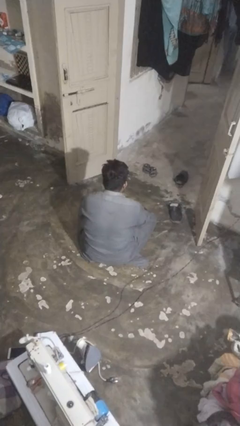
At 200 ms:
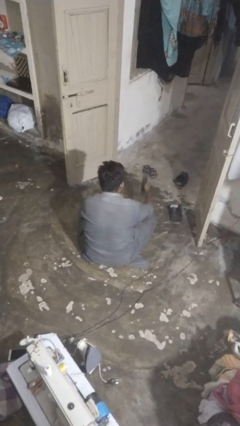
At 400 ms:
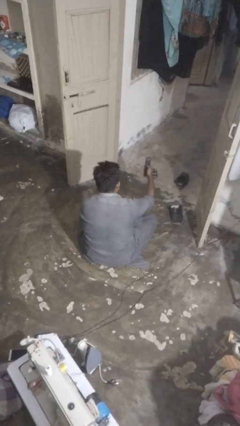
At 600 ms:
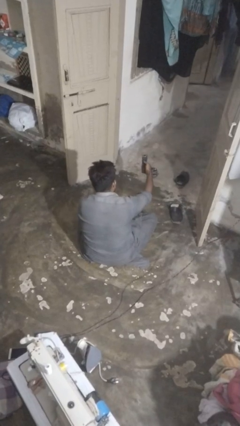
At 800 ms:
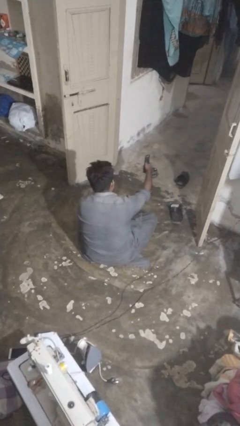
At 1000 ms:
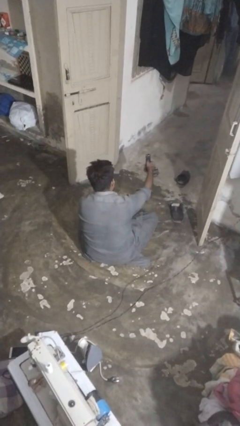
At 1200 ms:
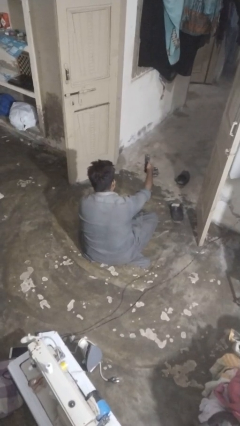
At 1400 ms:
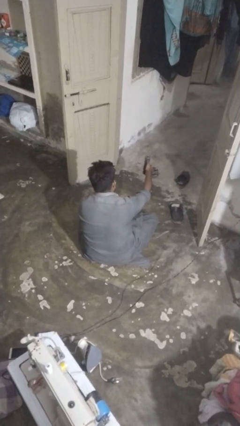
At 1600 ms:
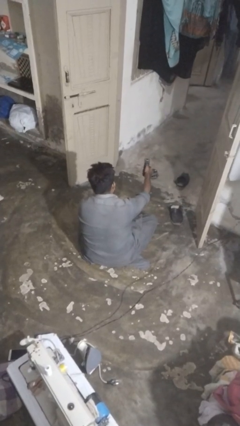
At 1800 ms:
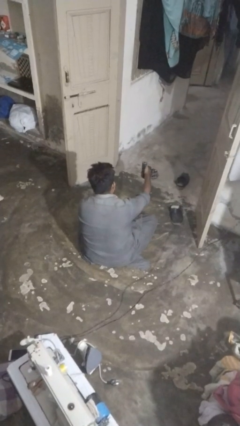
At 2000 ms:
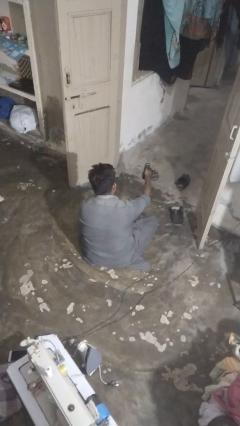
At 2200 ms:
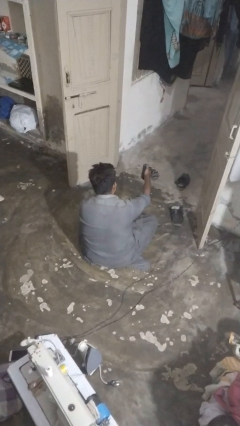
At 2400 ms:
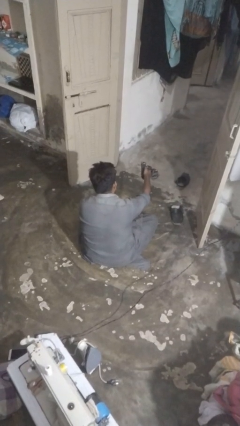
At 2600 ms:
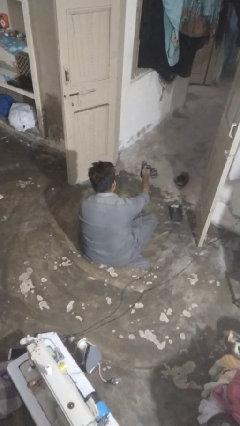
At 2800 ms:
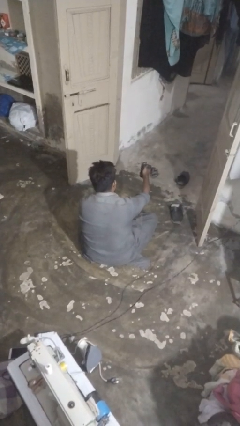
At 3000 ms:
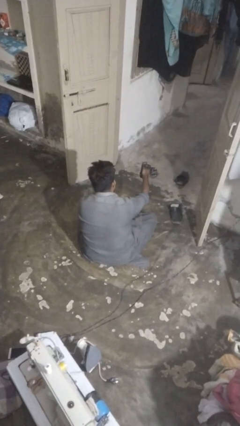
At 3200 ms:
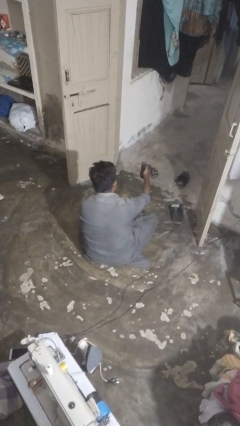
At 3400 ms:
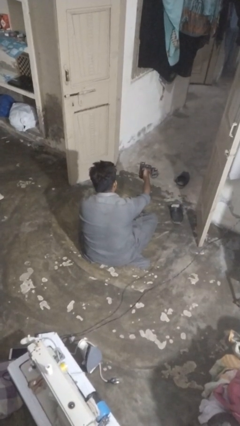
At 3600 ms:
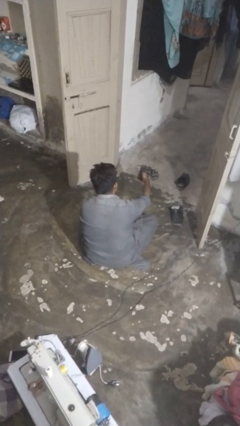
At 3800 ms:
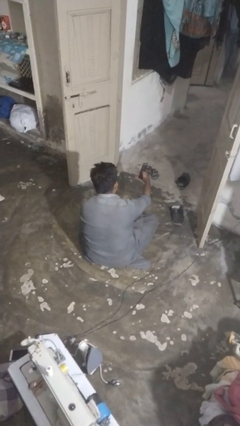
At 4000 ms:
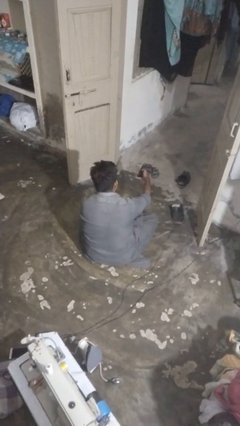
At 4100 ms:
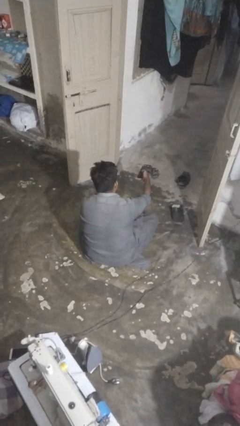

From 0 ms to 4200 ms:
person uses television remote

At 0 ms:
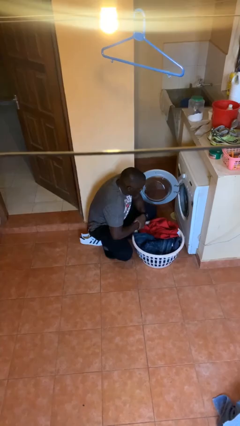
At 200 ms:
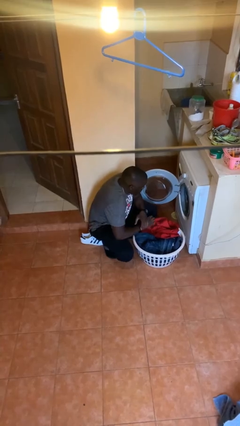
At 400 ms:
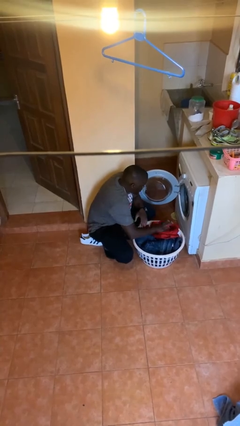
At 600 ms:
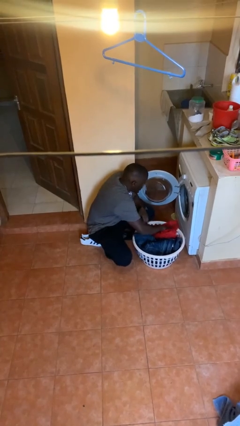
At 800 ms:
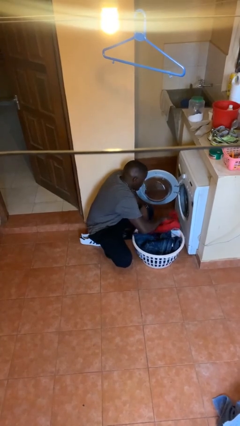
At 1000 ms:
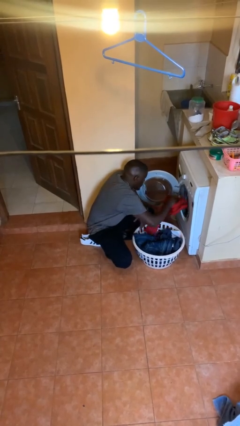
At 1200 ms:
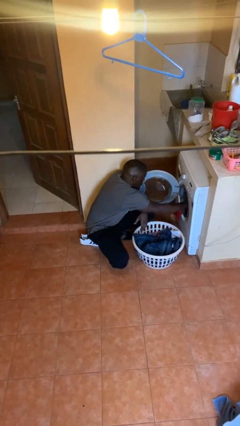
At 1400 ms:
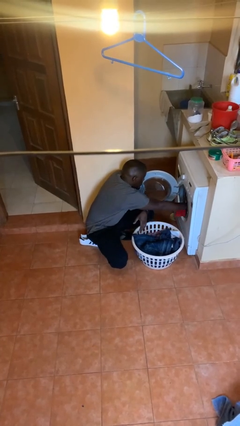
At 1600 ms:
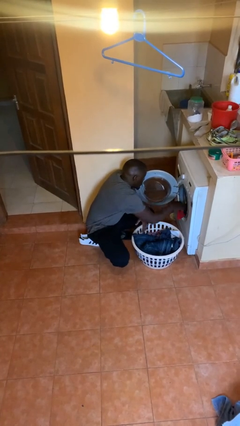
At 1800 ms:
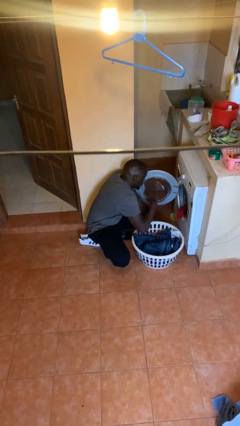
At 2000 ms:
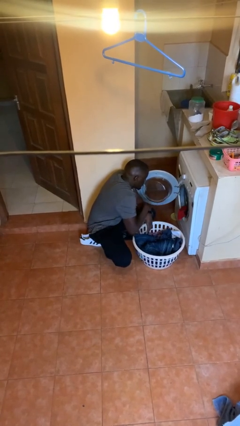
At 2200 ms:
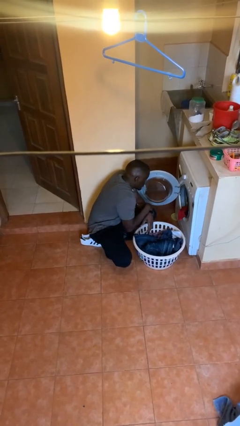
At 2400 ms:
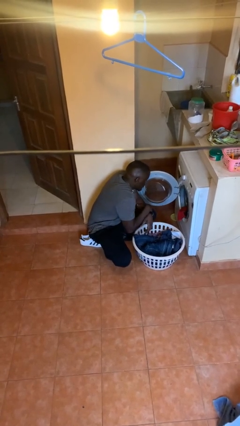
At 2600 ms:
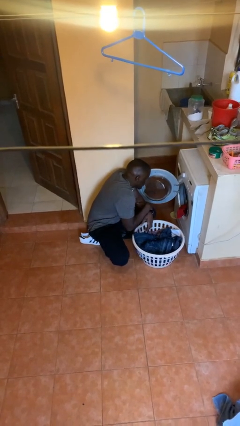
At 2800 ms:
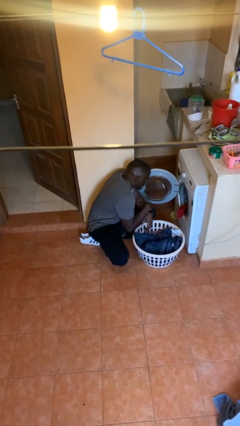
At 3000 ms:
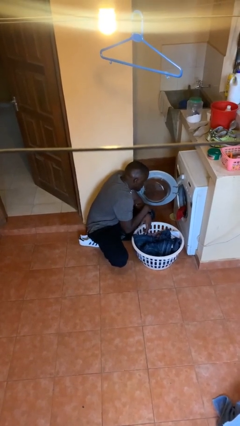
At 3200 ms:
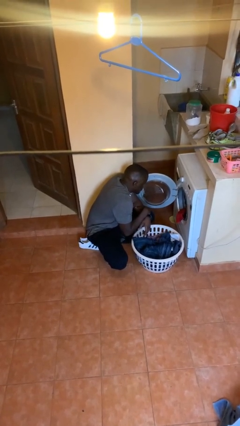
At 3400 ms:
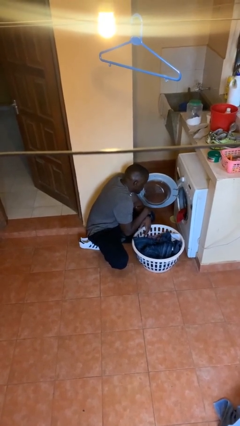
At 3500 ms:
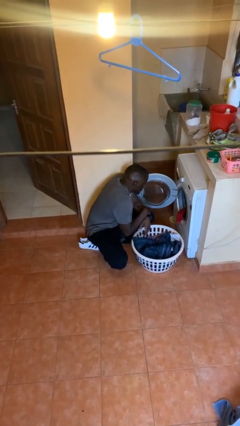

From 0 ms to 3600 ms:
person loads dryer

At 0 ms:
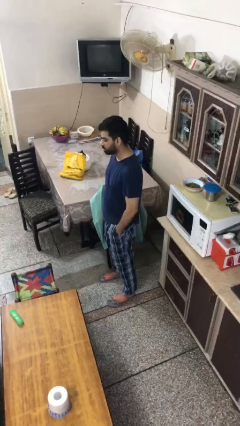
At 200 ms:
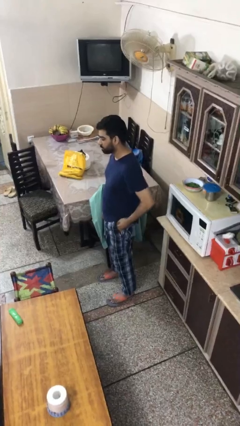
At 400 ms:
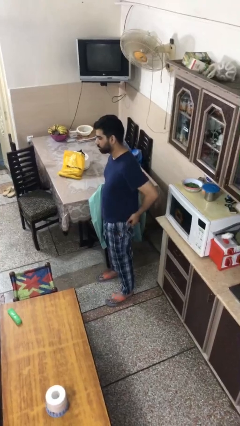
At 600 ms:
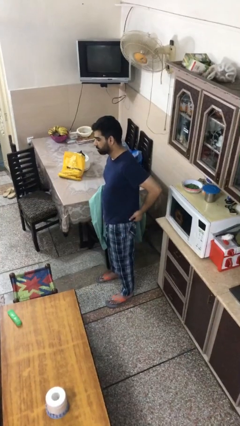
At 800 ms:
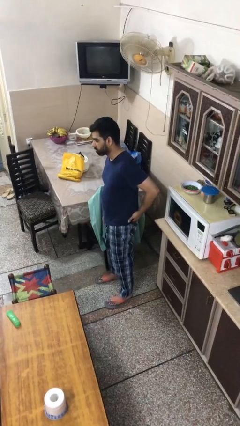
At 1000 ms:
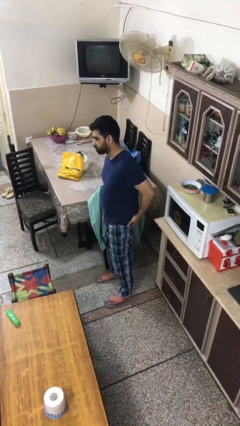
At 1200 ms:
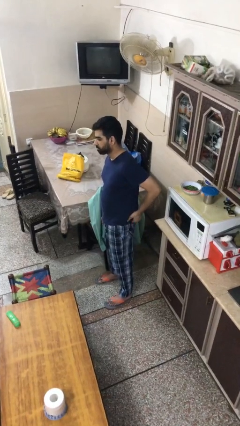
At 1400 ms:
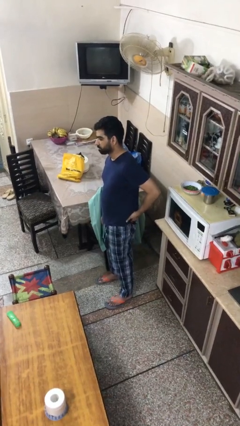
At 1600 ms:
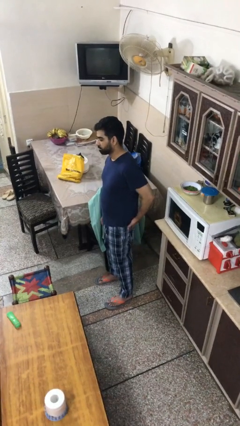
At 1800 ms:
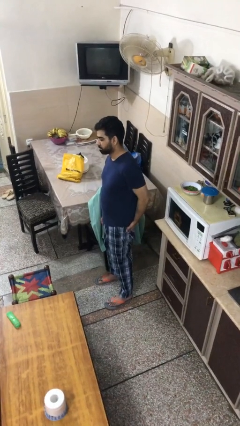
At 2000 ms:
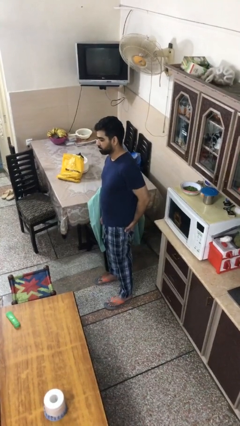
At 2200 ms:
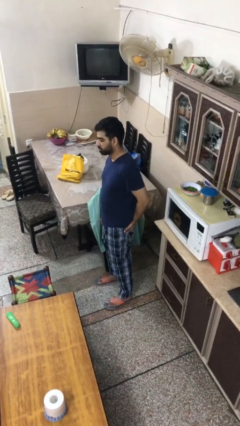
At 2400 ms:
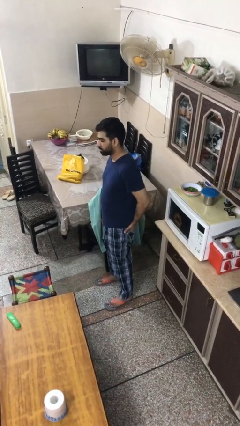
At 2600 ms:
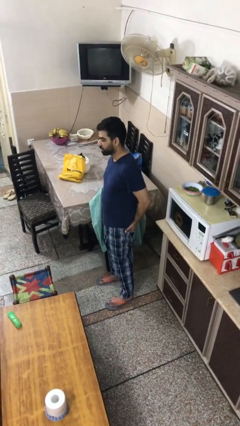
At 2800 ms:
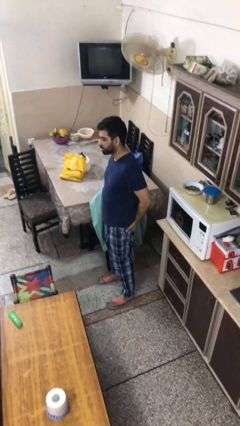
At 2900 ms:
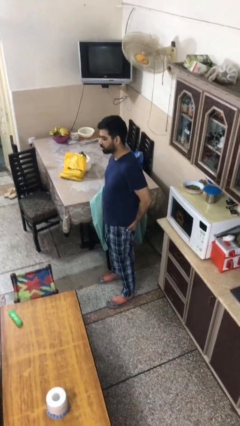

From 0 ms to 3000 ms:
person puts hands in back pockets

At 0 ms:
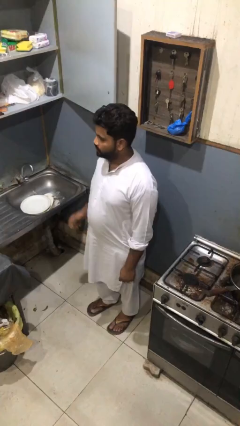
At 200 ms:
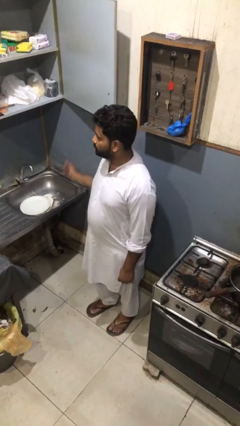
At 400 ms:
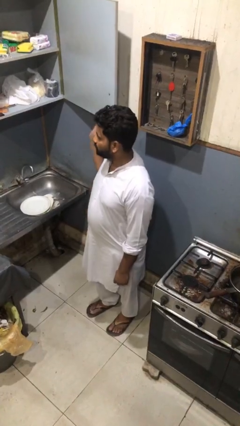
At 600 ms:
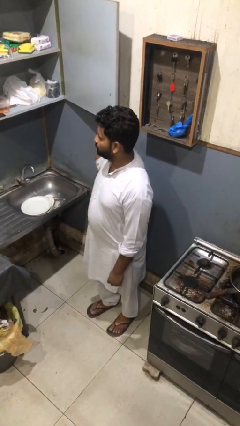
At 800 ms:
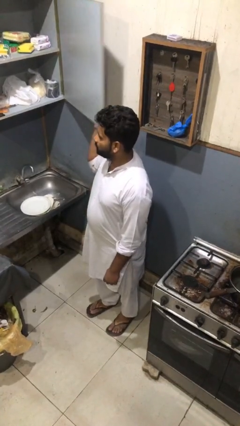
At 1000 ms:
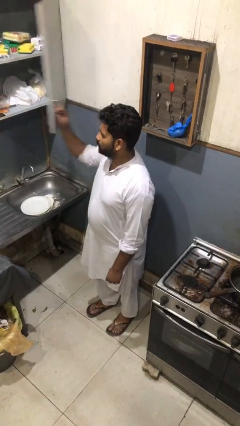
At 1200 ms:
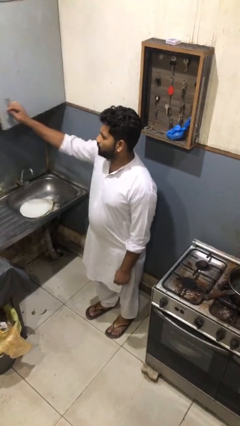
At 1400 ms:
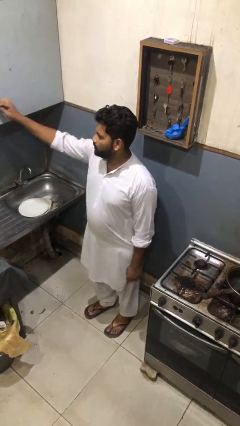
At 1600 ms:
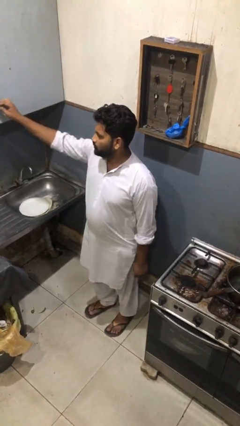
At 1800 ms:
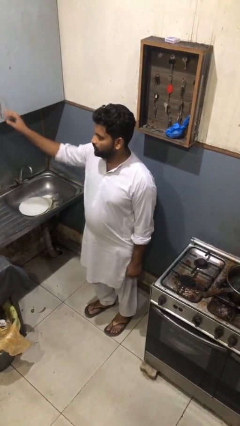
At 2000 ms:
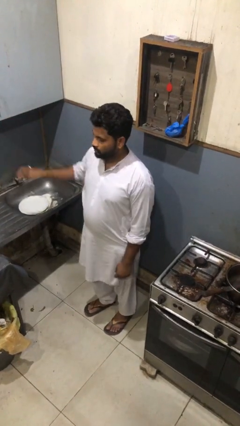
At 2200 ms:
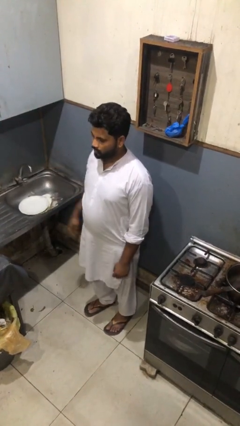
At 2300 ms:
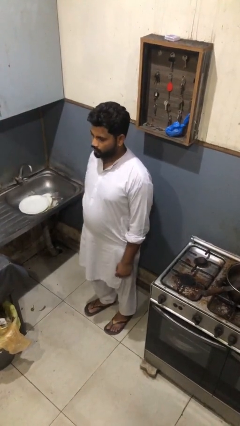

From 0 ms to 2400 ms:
person closes cabinet

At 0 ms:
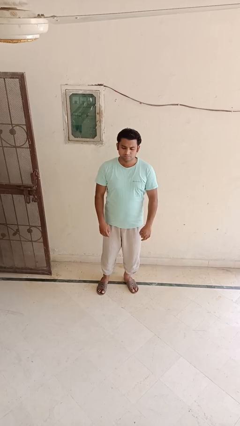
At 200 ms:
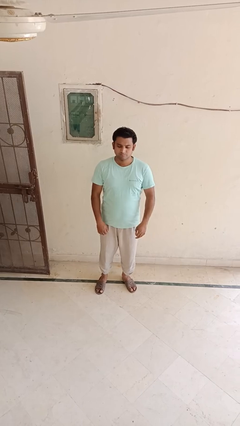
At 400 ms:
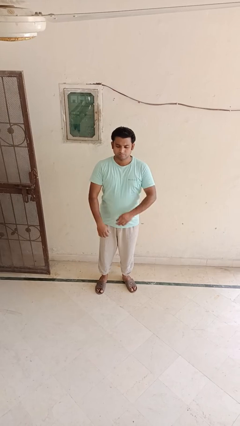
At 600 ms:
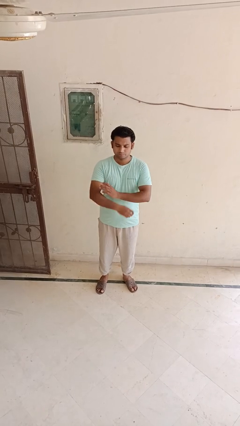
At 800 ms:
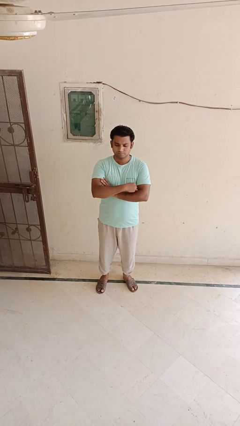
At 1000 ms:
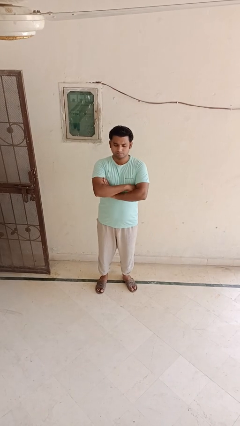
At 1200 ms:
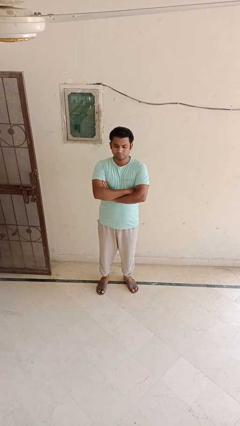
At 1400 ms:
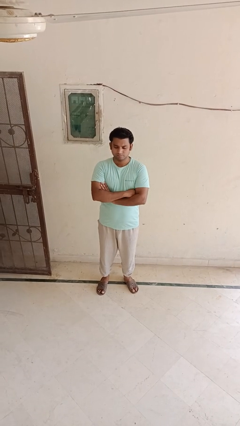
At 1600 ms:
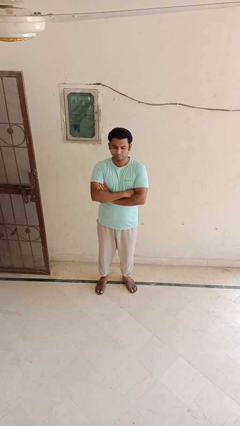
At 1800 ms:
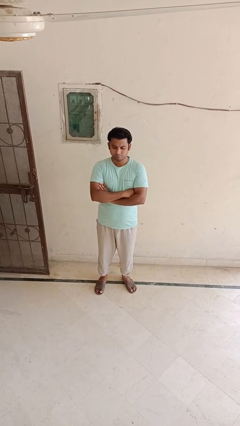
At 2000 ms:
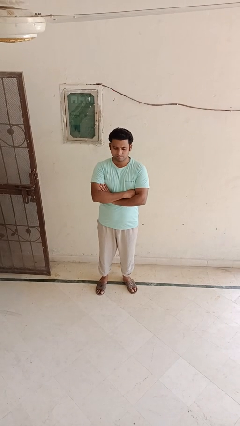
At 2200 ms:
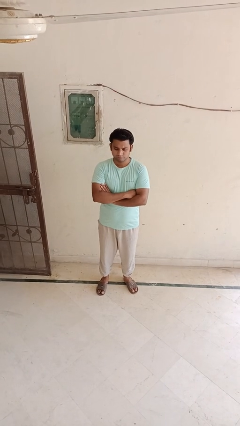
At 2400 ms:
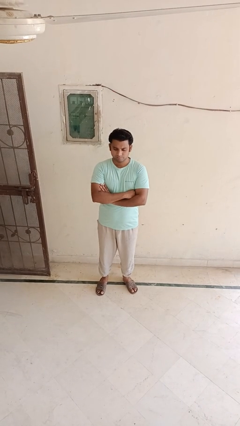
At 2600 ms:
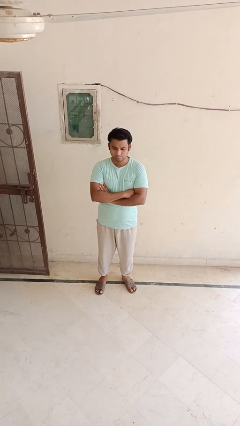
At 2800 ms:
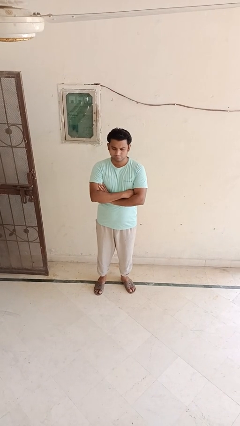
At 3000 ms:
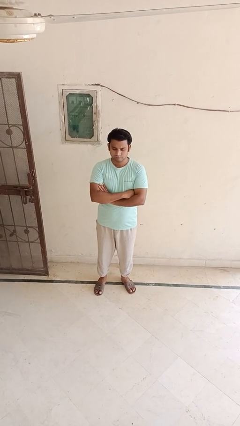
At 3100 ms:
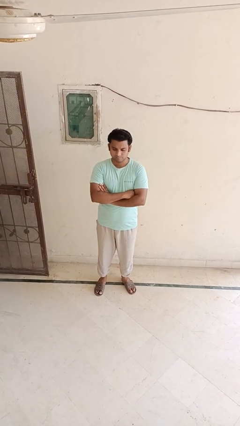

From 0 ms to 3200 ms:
person crosses arms

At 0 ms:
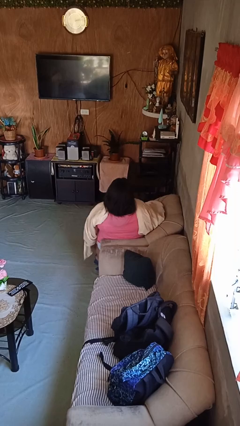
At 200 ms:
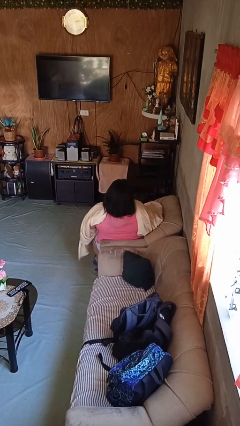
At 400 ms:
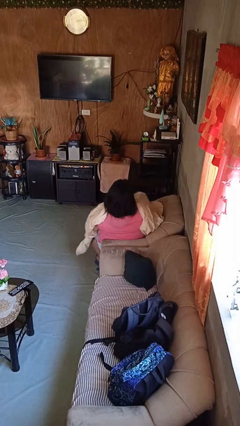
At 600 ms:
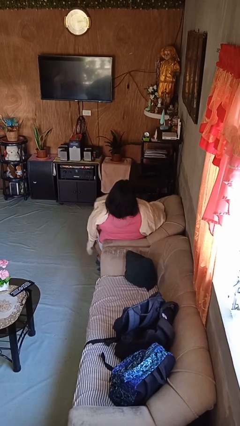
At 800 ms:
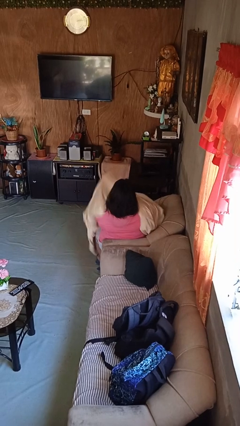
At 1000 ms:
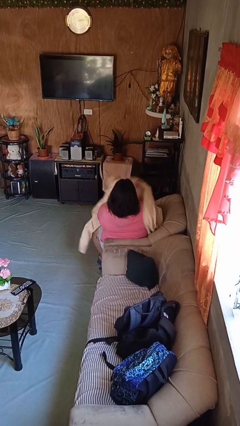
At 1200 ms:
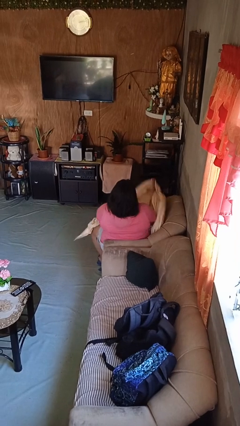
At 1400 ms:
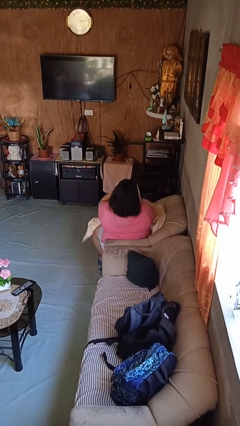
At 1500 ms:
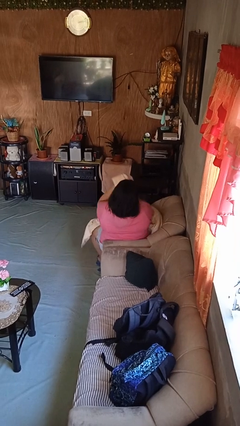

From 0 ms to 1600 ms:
person uncovers with blanket
